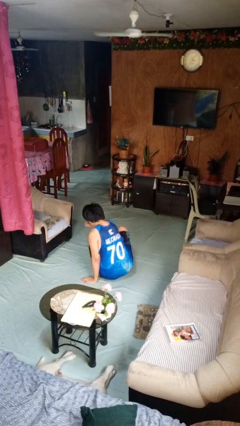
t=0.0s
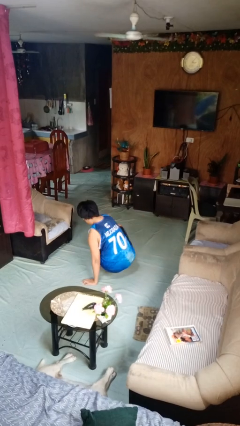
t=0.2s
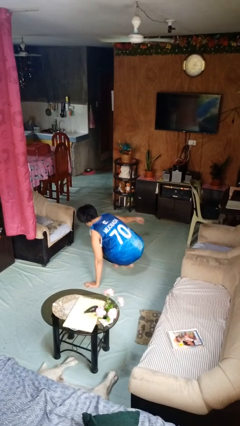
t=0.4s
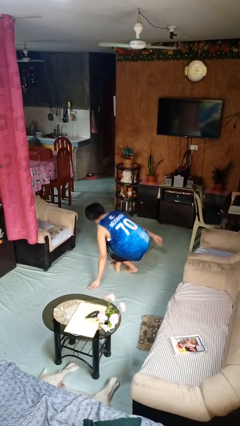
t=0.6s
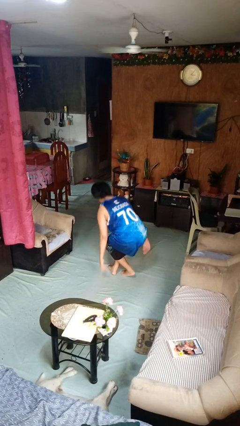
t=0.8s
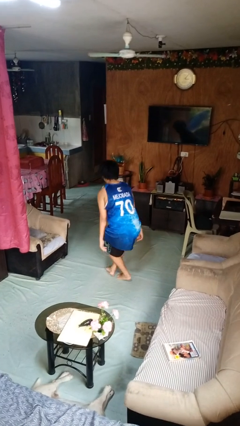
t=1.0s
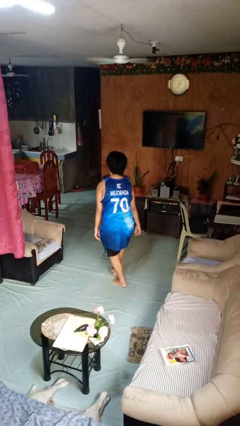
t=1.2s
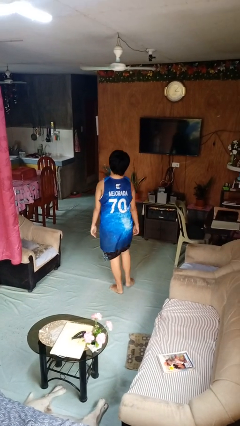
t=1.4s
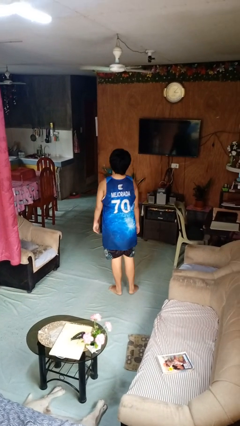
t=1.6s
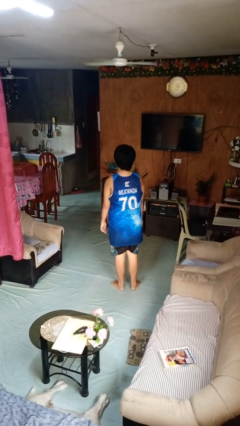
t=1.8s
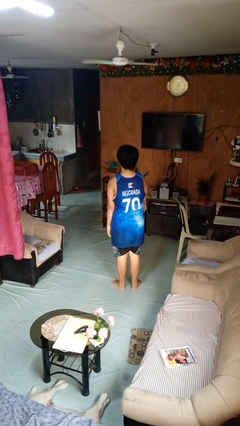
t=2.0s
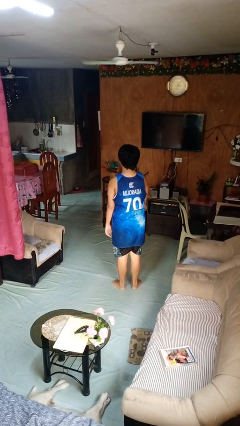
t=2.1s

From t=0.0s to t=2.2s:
person stands up from floor

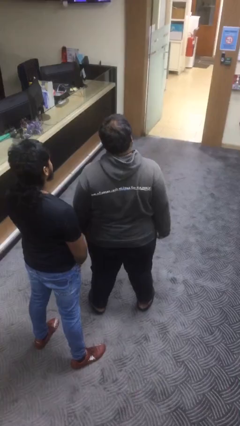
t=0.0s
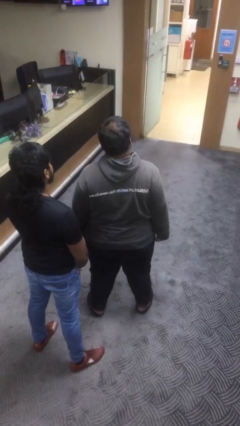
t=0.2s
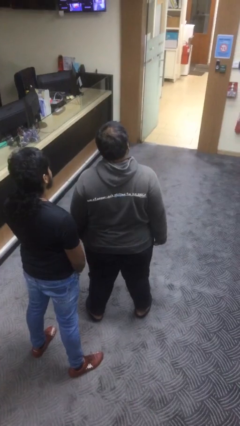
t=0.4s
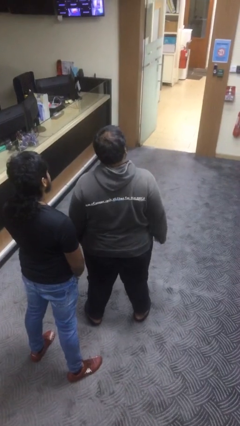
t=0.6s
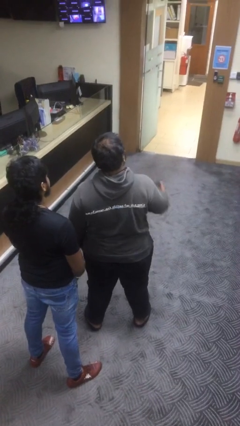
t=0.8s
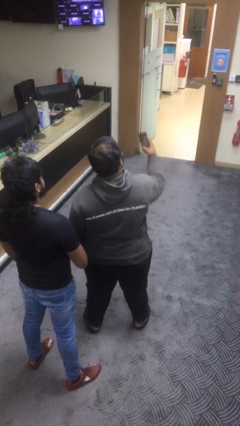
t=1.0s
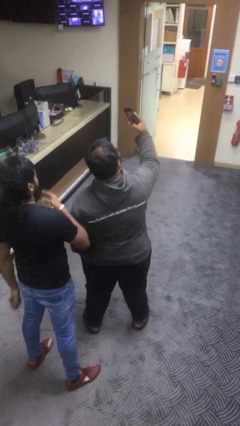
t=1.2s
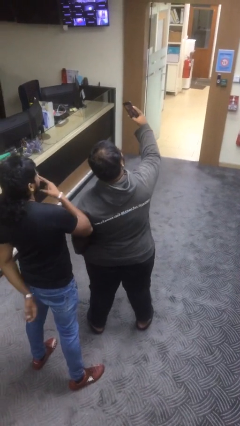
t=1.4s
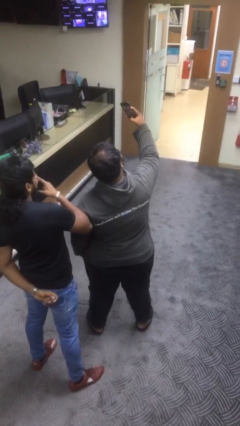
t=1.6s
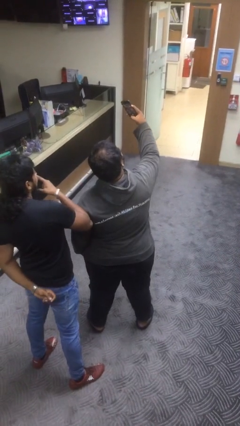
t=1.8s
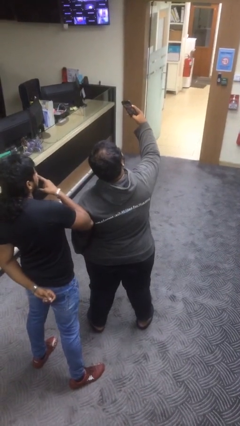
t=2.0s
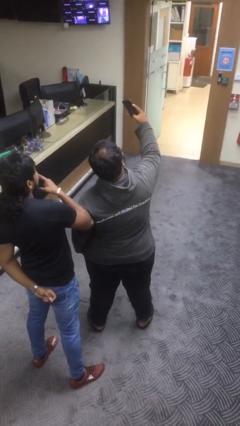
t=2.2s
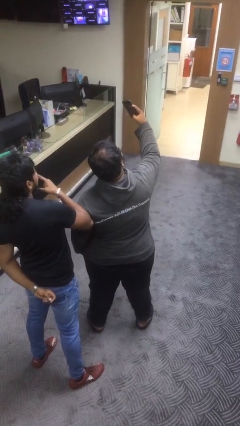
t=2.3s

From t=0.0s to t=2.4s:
person takes selfie with person

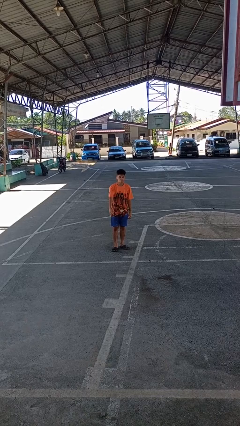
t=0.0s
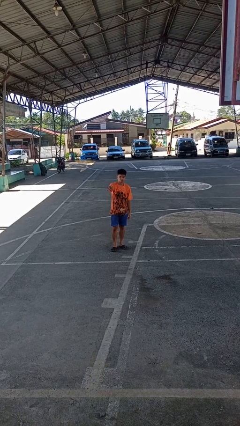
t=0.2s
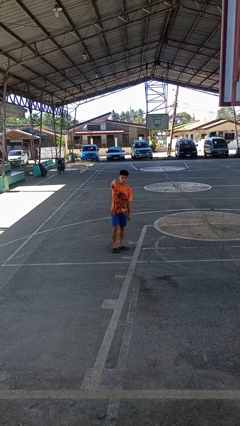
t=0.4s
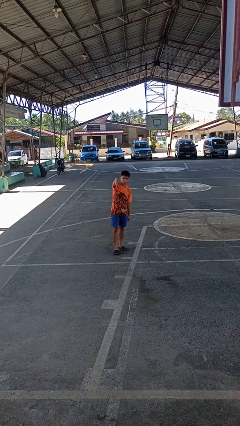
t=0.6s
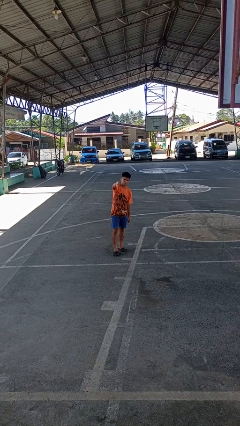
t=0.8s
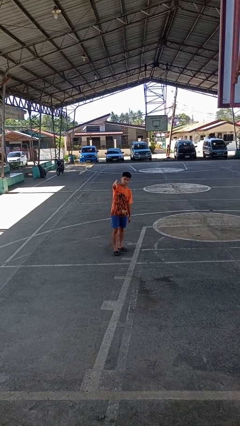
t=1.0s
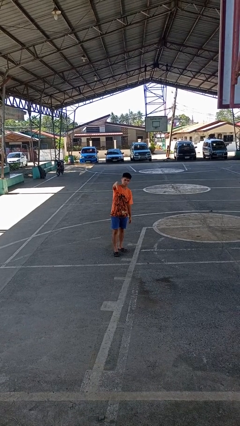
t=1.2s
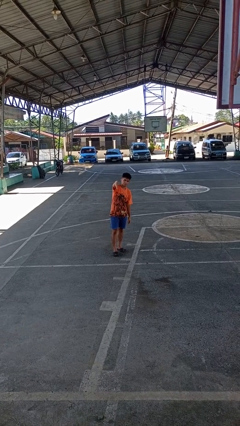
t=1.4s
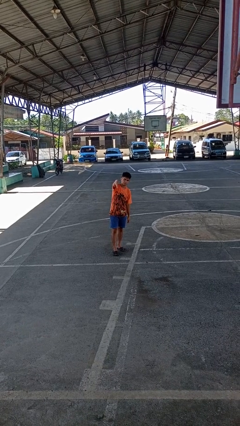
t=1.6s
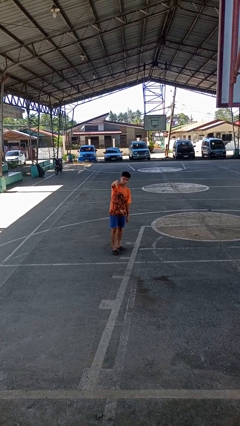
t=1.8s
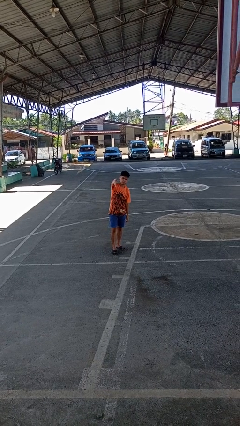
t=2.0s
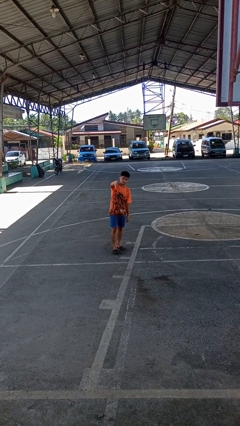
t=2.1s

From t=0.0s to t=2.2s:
person gestures thumbs down

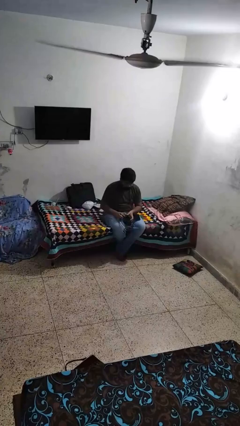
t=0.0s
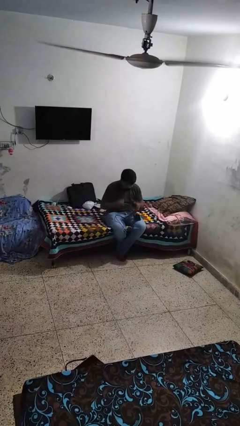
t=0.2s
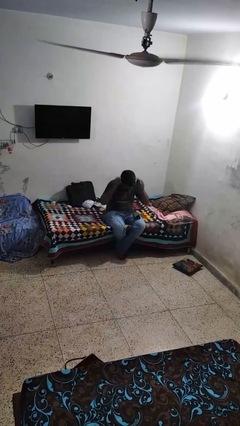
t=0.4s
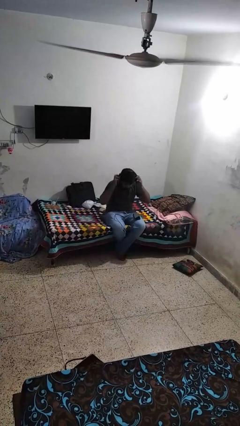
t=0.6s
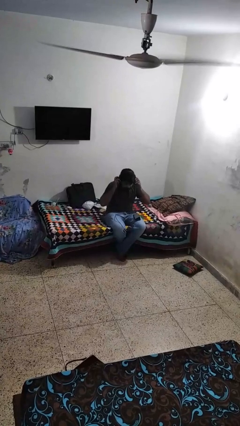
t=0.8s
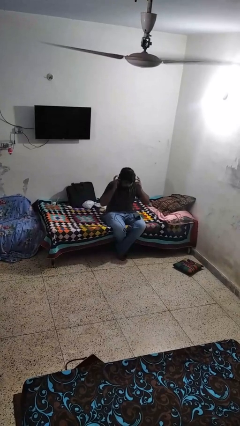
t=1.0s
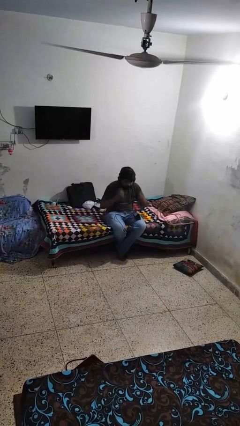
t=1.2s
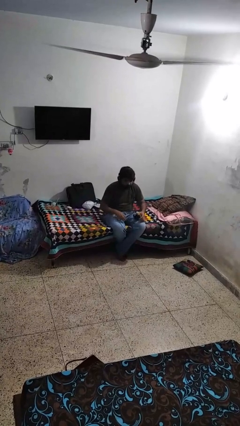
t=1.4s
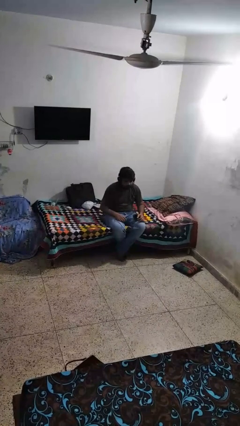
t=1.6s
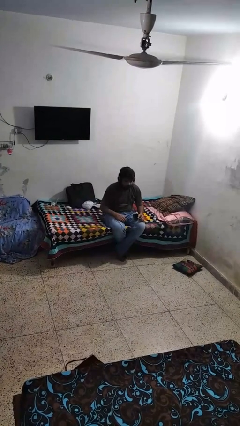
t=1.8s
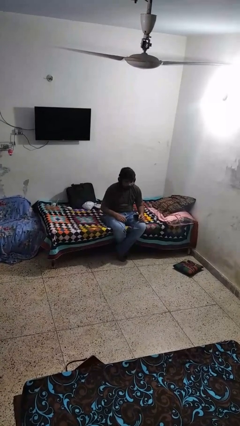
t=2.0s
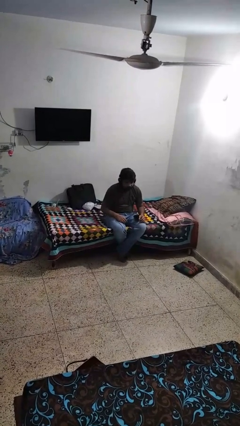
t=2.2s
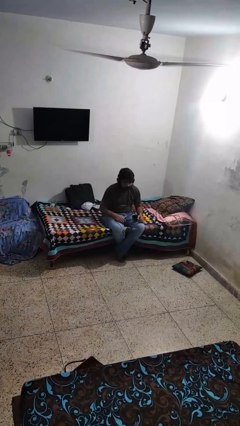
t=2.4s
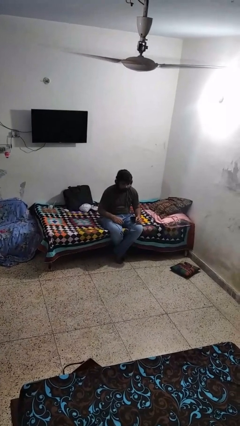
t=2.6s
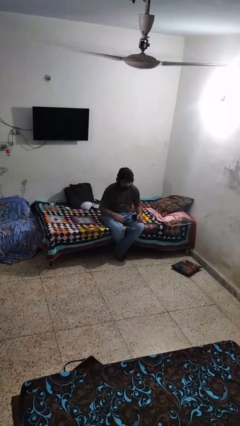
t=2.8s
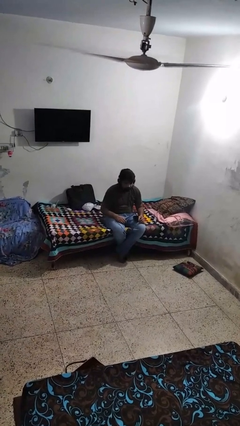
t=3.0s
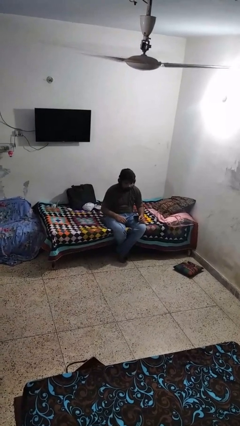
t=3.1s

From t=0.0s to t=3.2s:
person puts on headphones

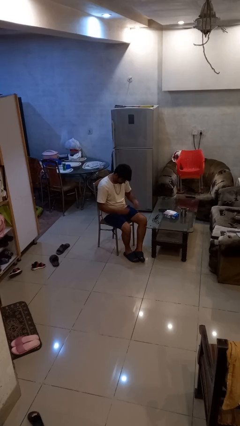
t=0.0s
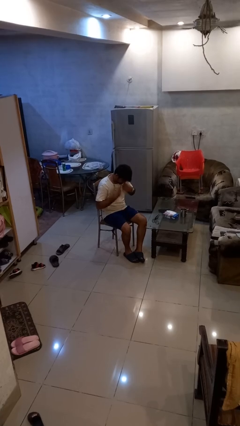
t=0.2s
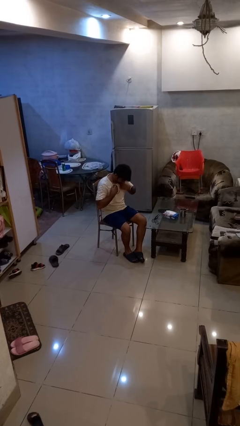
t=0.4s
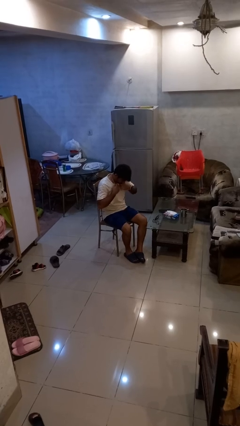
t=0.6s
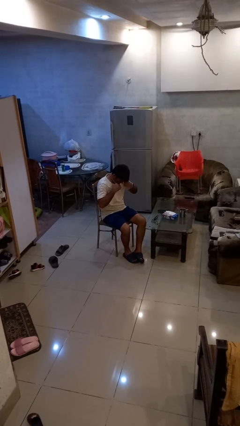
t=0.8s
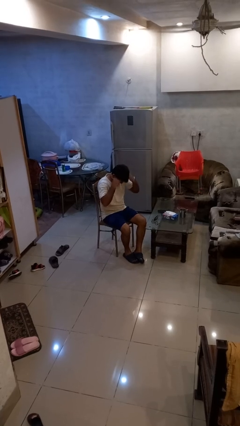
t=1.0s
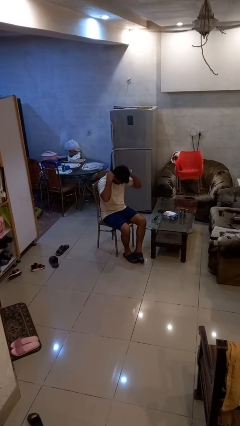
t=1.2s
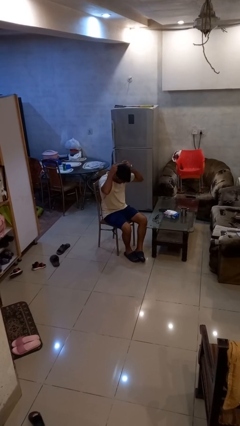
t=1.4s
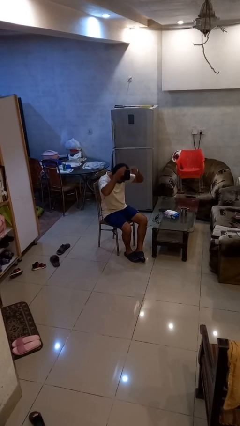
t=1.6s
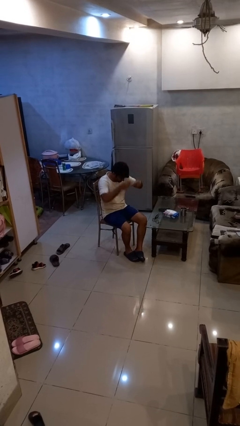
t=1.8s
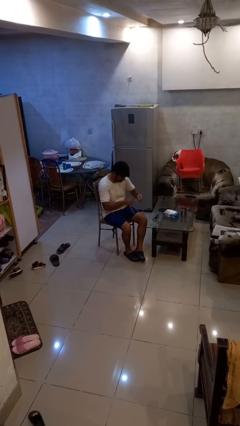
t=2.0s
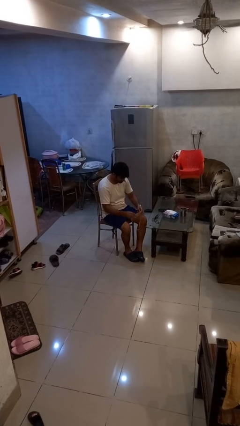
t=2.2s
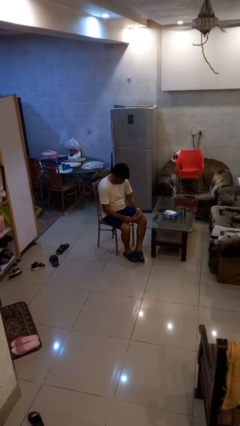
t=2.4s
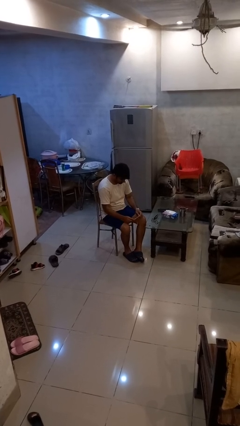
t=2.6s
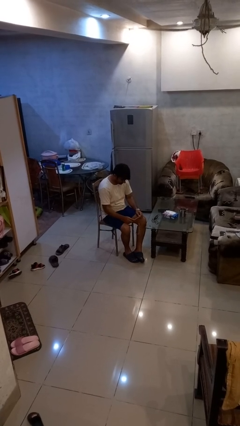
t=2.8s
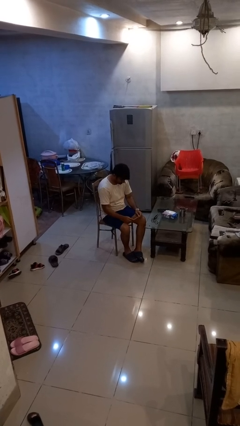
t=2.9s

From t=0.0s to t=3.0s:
person takes off necklace

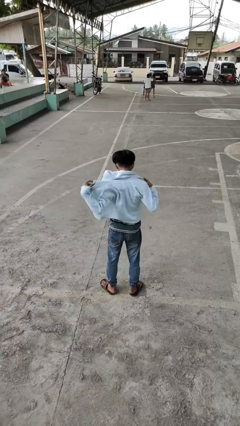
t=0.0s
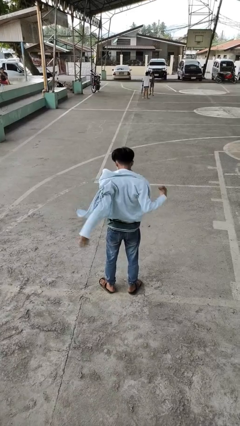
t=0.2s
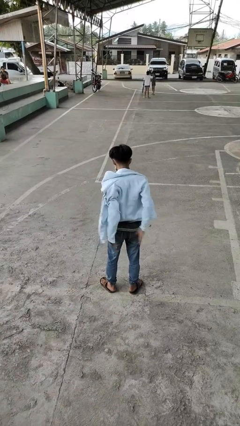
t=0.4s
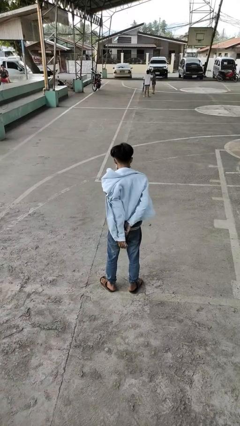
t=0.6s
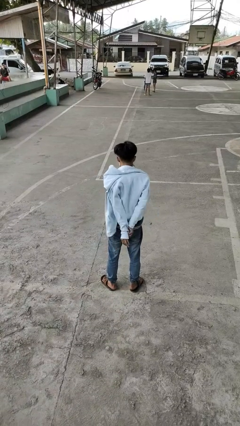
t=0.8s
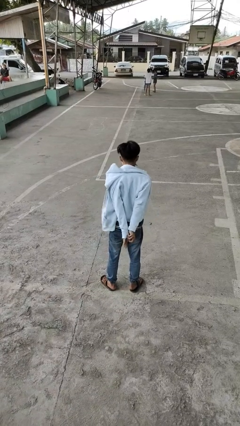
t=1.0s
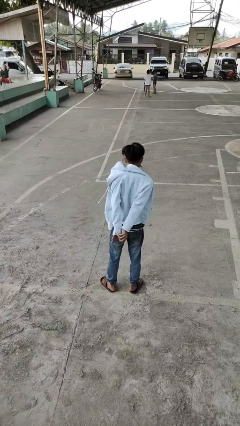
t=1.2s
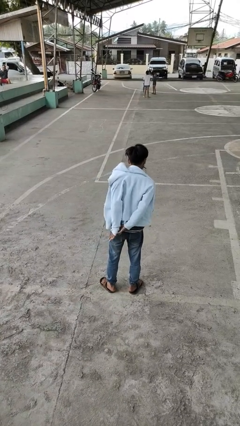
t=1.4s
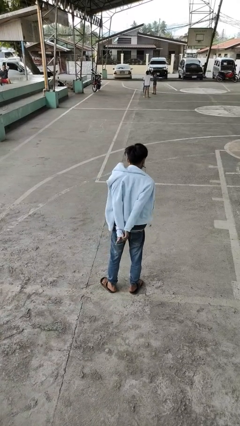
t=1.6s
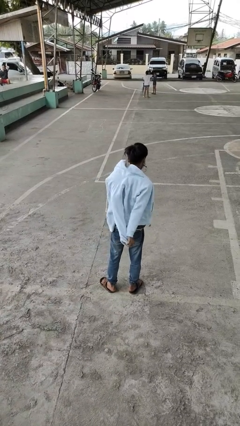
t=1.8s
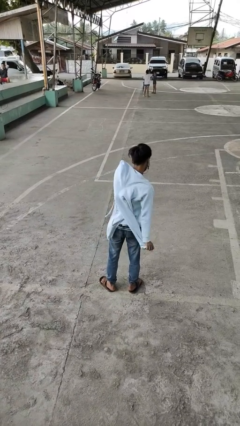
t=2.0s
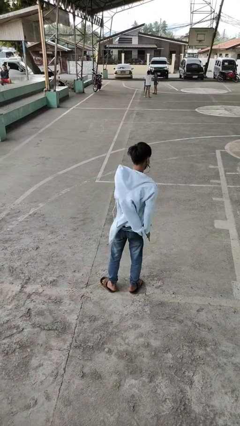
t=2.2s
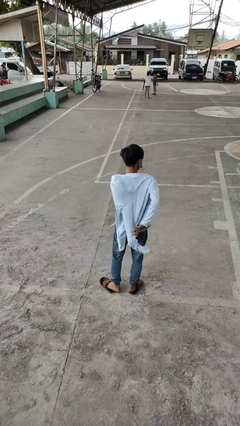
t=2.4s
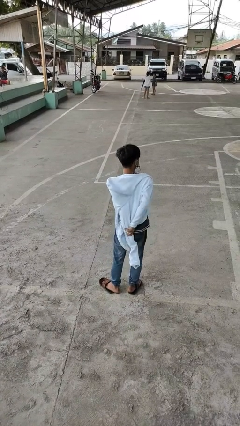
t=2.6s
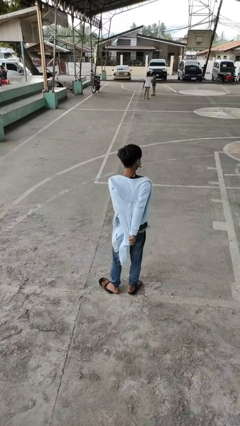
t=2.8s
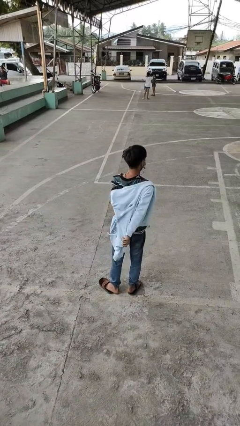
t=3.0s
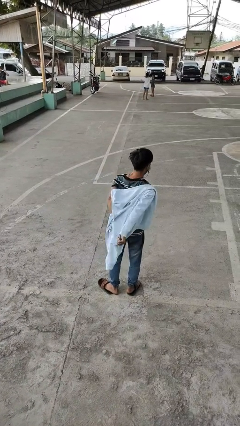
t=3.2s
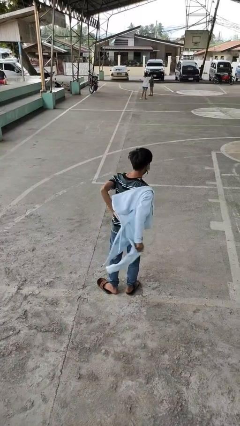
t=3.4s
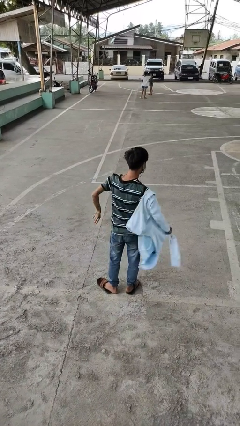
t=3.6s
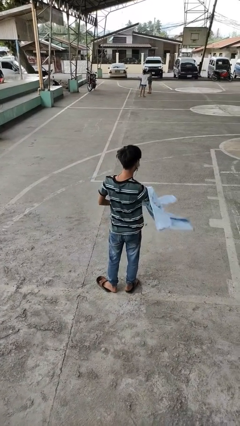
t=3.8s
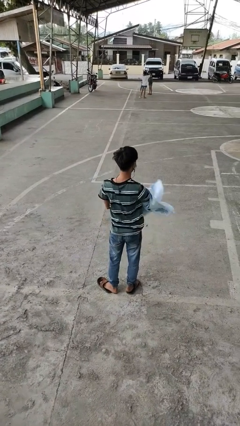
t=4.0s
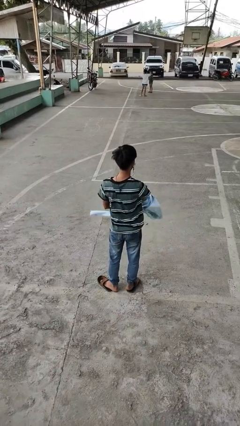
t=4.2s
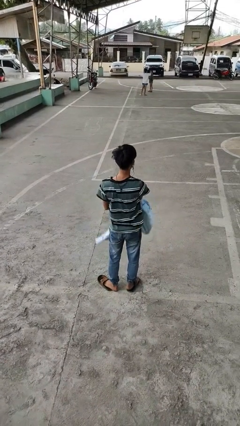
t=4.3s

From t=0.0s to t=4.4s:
person takes off jacket
